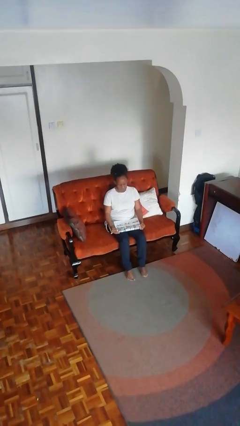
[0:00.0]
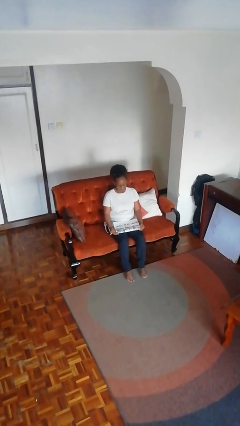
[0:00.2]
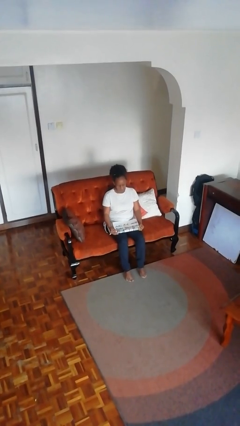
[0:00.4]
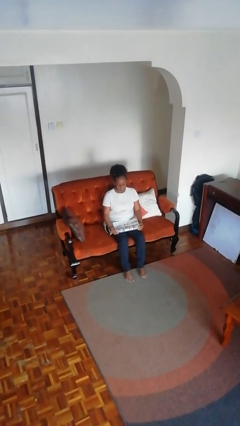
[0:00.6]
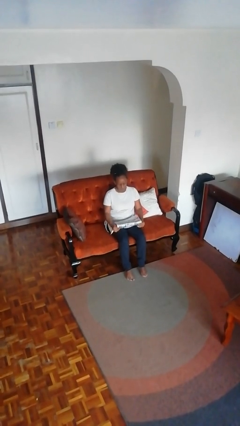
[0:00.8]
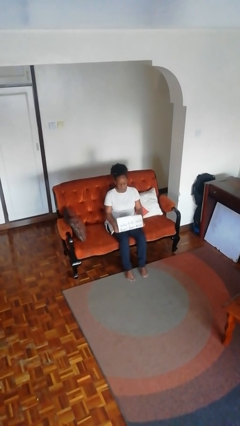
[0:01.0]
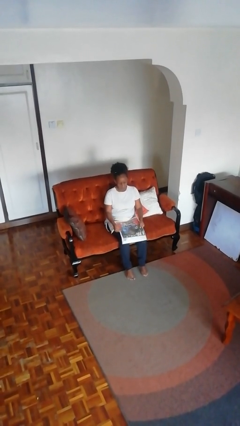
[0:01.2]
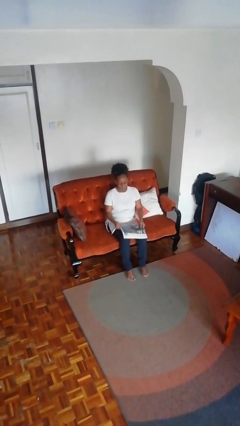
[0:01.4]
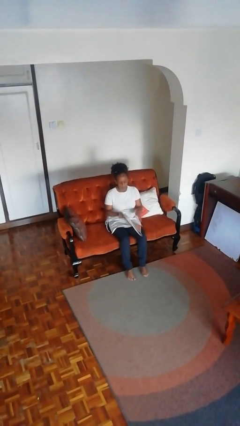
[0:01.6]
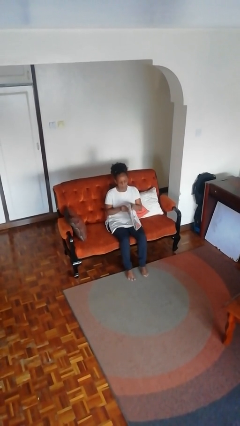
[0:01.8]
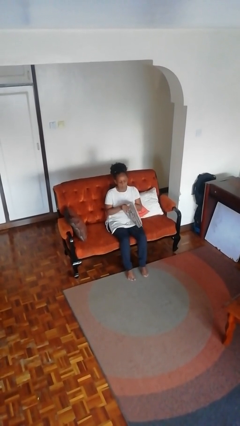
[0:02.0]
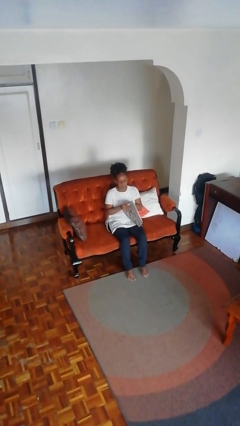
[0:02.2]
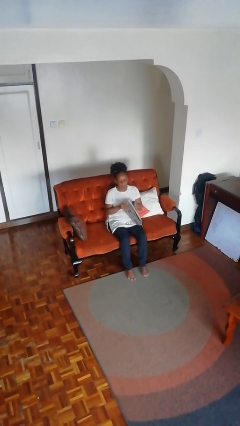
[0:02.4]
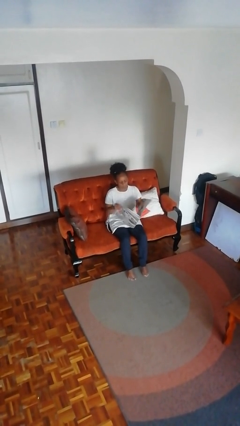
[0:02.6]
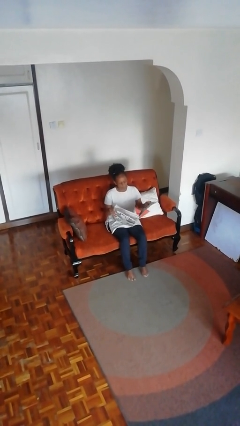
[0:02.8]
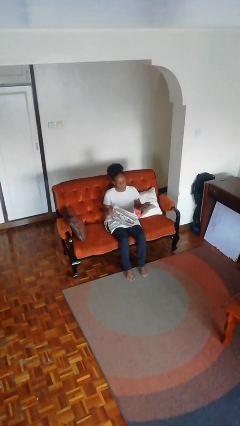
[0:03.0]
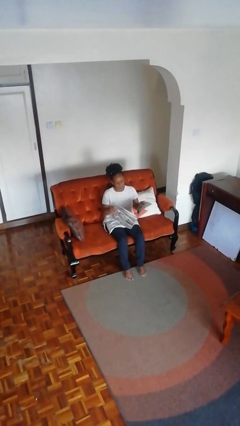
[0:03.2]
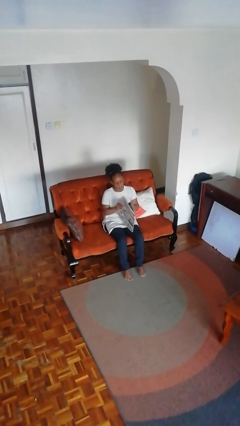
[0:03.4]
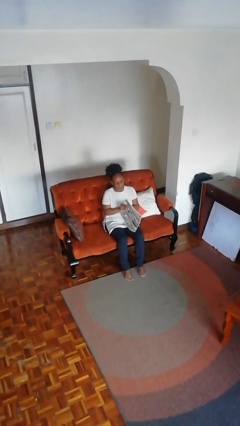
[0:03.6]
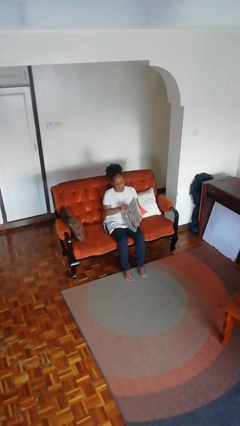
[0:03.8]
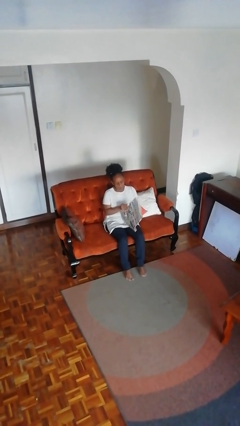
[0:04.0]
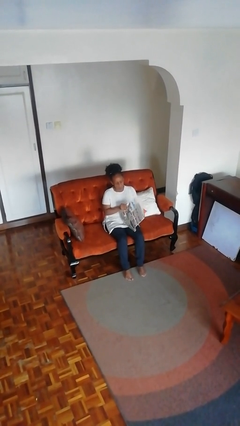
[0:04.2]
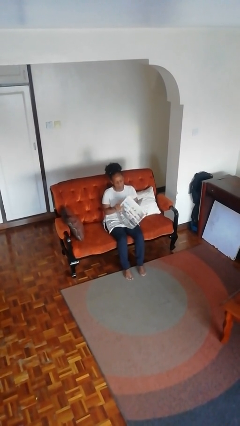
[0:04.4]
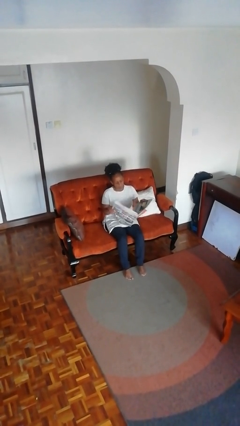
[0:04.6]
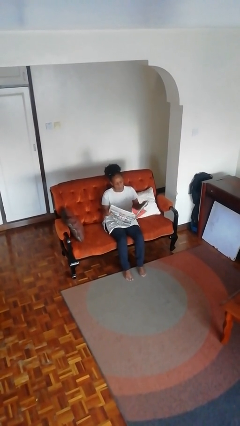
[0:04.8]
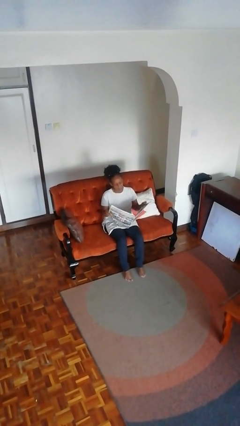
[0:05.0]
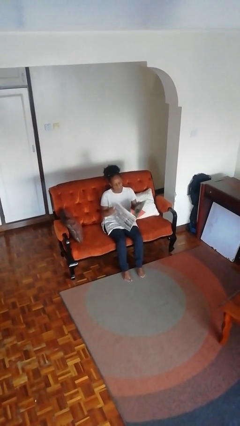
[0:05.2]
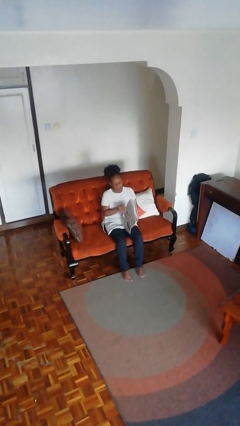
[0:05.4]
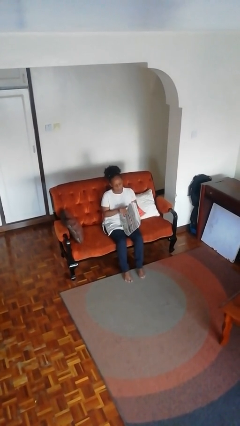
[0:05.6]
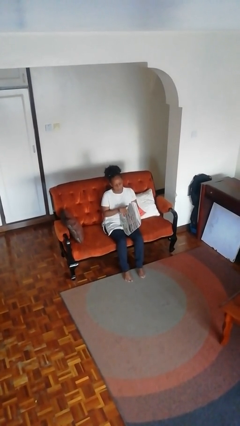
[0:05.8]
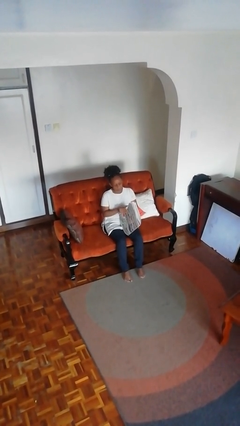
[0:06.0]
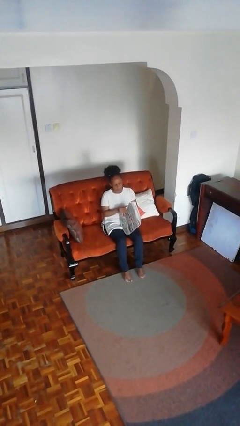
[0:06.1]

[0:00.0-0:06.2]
person reads newspaper

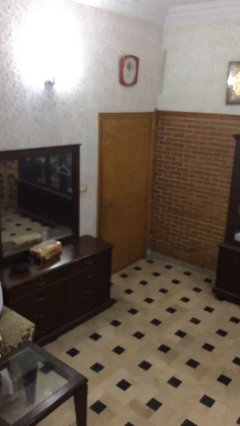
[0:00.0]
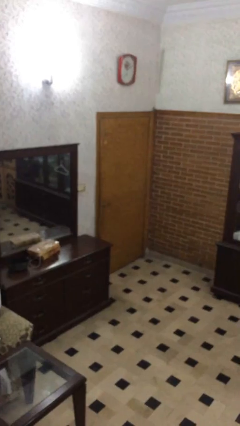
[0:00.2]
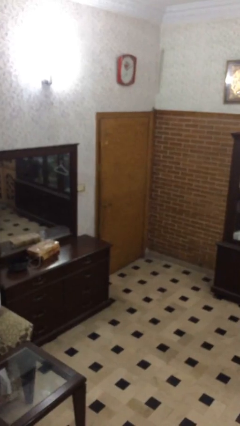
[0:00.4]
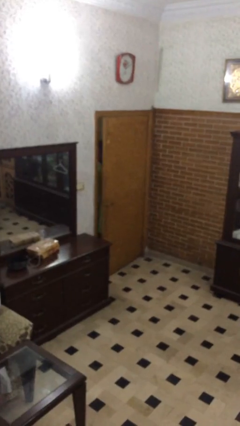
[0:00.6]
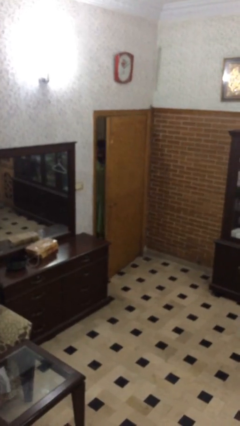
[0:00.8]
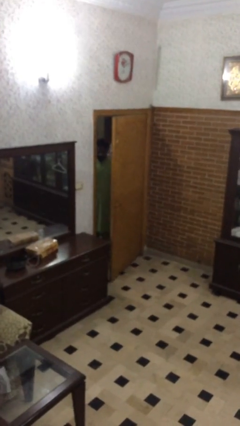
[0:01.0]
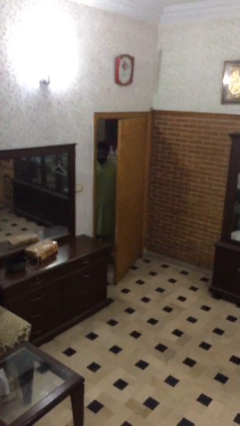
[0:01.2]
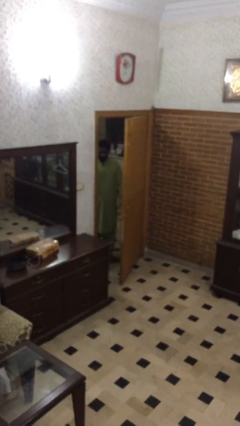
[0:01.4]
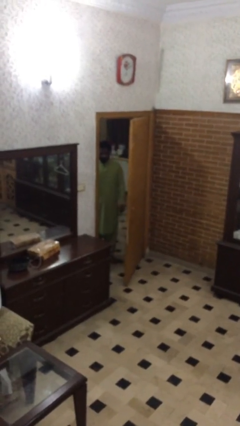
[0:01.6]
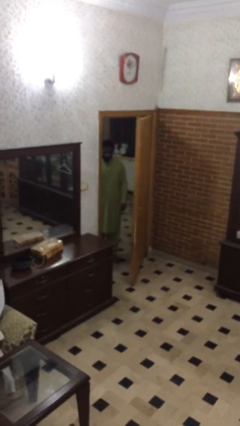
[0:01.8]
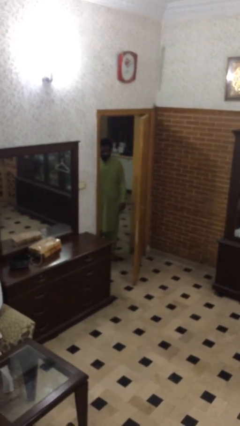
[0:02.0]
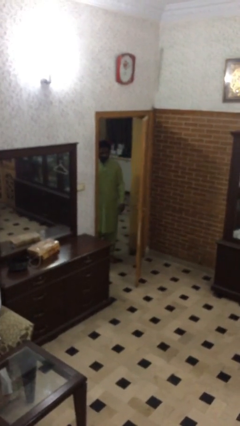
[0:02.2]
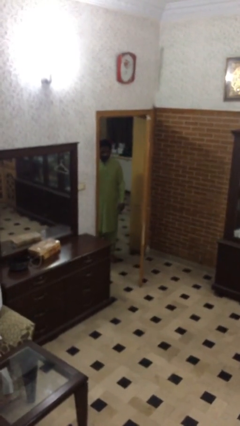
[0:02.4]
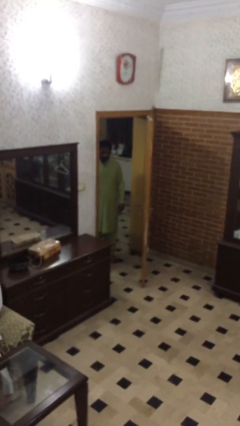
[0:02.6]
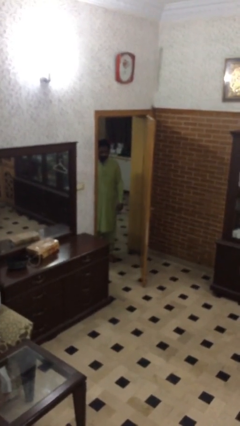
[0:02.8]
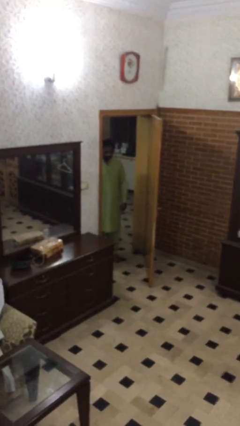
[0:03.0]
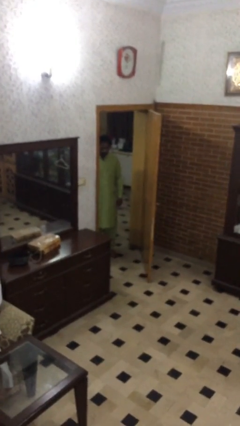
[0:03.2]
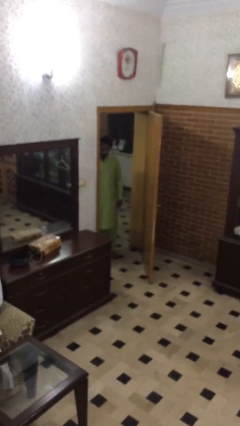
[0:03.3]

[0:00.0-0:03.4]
person opens facility door

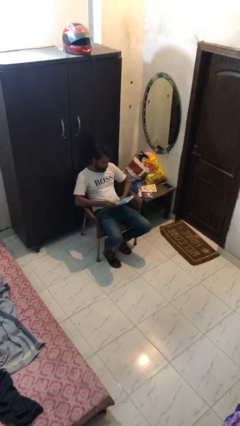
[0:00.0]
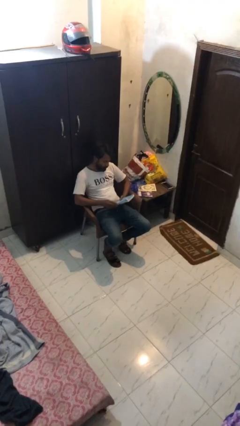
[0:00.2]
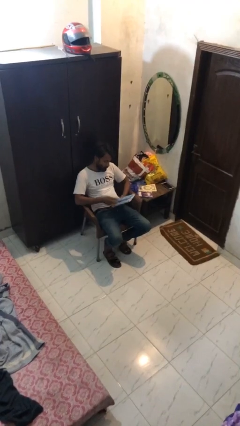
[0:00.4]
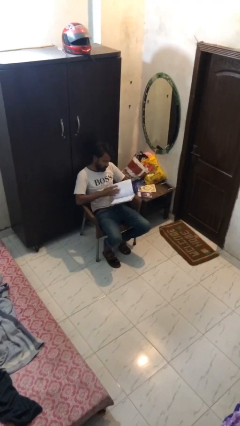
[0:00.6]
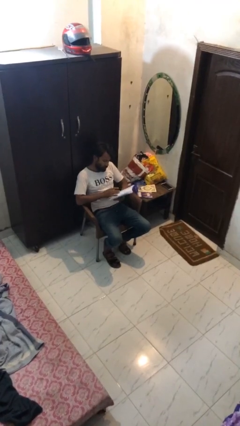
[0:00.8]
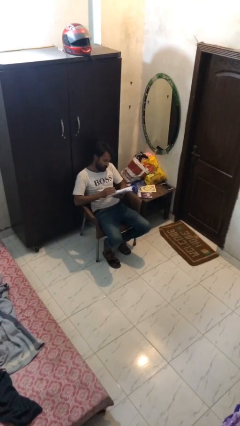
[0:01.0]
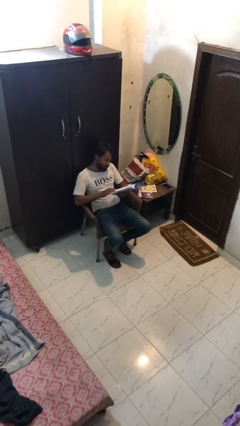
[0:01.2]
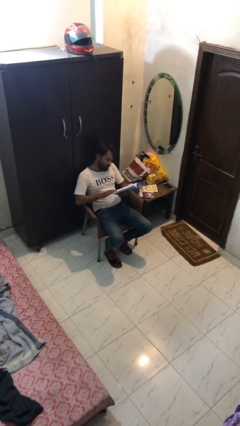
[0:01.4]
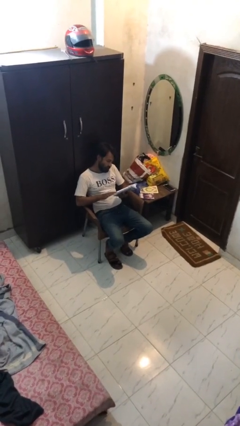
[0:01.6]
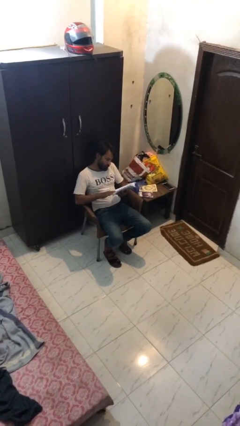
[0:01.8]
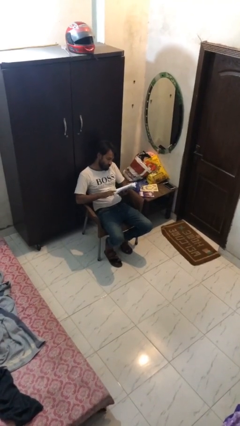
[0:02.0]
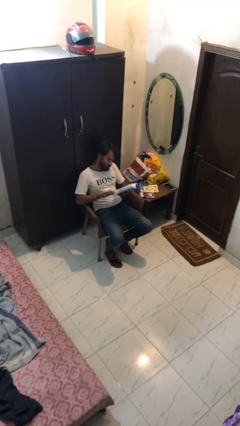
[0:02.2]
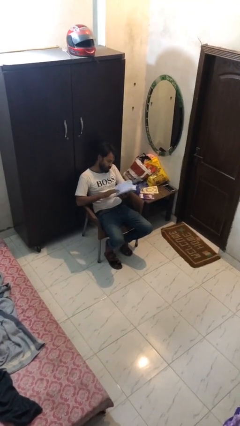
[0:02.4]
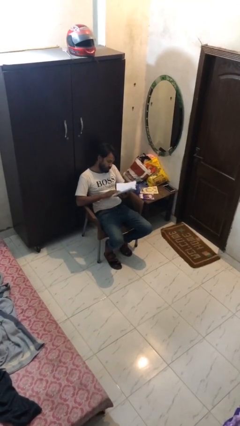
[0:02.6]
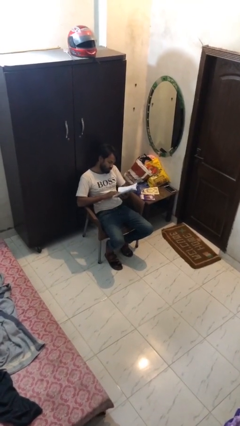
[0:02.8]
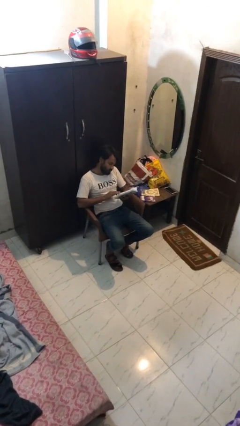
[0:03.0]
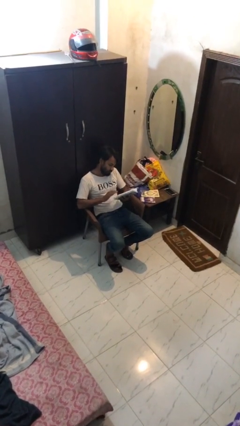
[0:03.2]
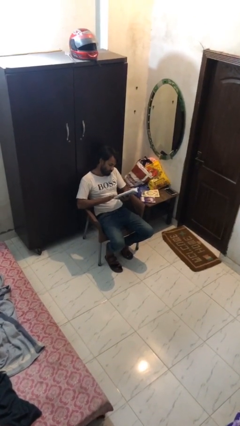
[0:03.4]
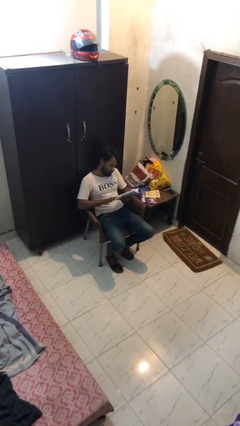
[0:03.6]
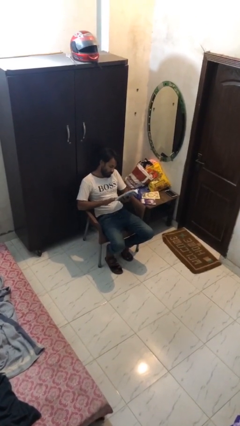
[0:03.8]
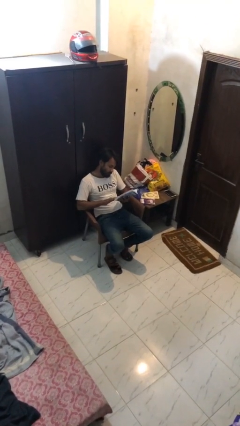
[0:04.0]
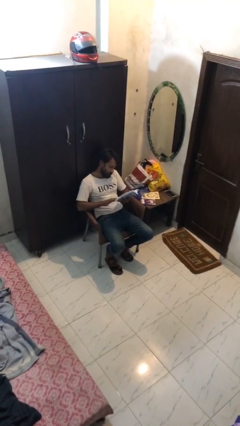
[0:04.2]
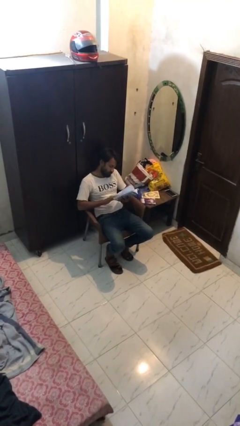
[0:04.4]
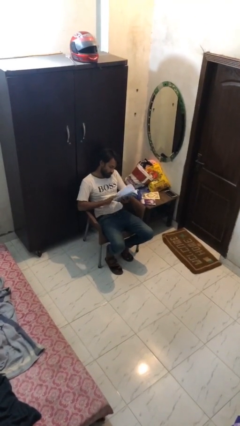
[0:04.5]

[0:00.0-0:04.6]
person reads document

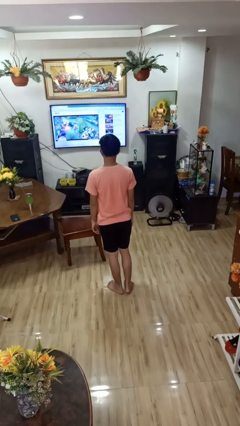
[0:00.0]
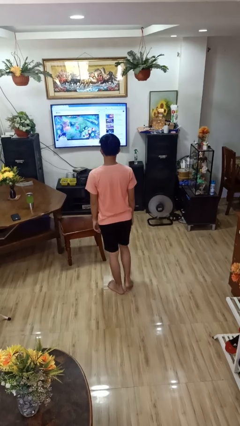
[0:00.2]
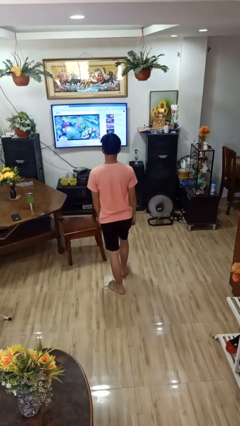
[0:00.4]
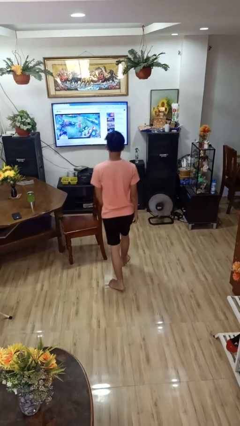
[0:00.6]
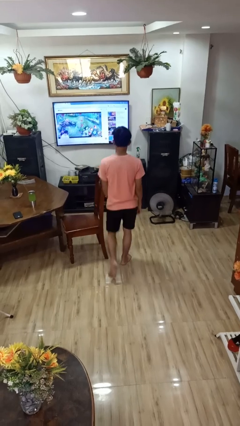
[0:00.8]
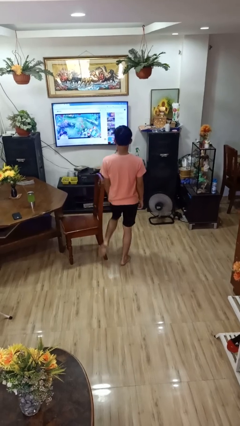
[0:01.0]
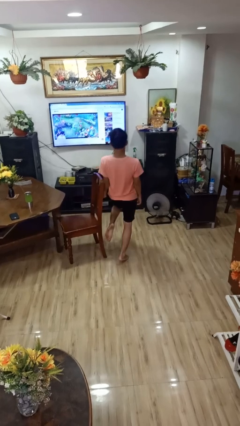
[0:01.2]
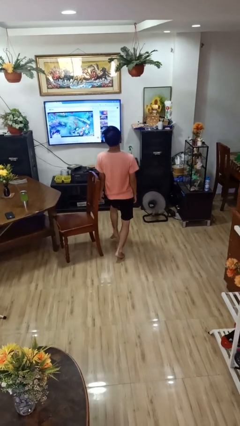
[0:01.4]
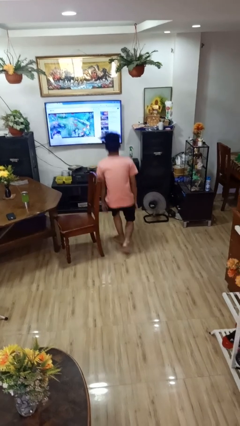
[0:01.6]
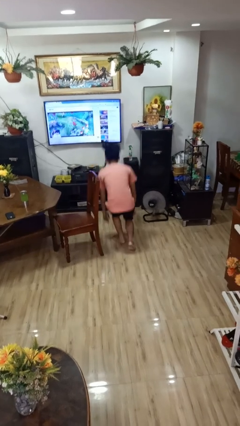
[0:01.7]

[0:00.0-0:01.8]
person trips on object on floor

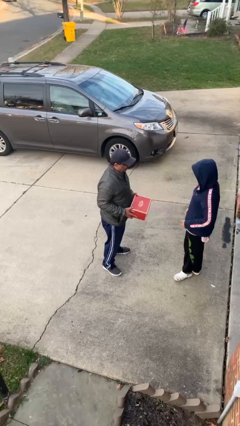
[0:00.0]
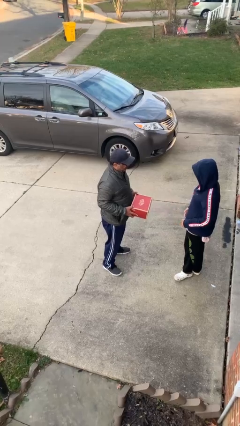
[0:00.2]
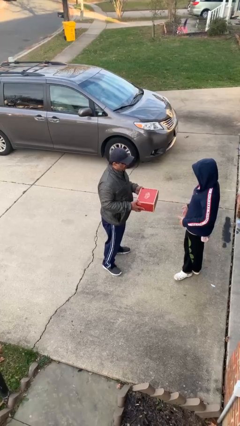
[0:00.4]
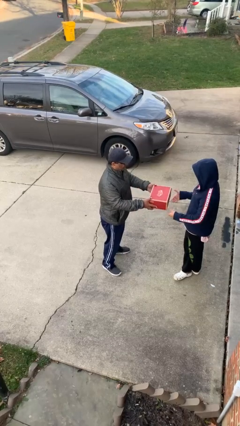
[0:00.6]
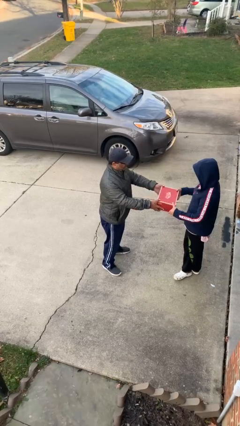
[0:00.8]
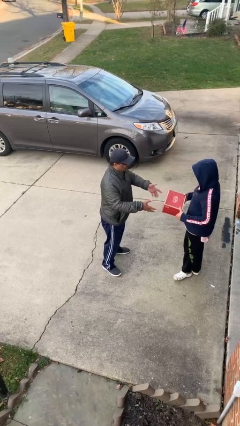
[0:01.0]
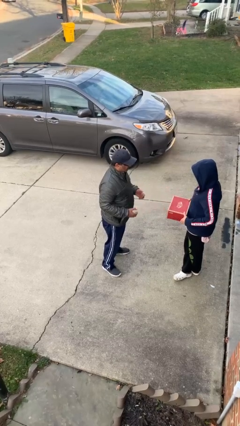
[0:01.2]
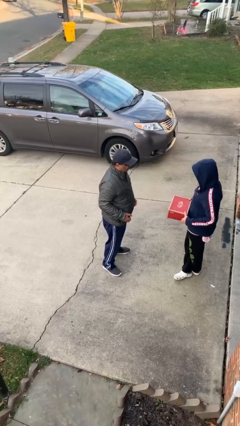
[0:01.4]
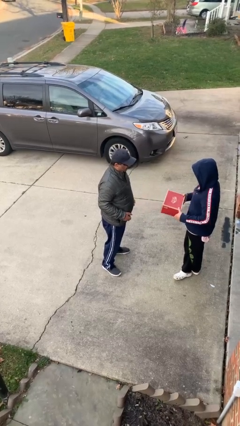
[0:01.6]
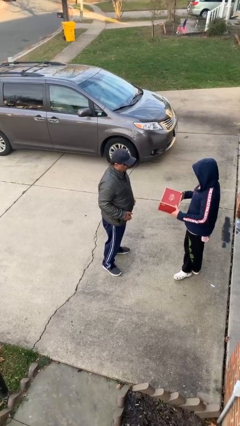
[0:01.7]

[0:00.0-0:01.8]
person transfers object to person
